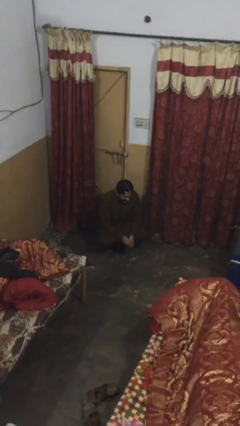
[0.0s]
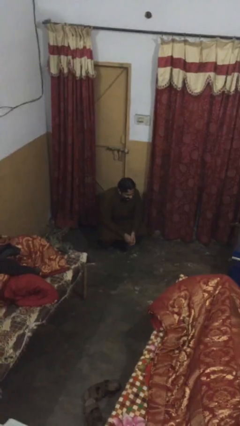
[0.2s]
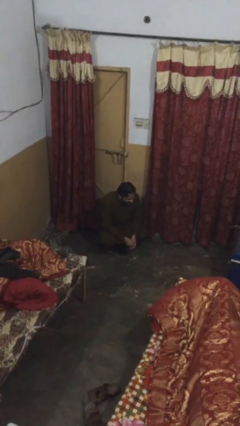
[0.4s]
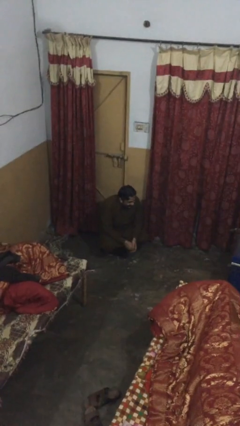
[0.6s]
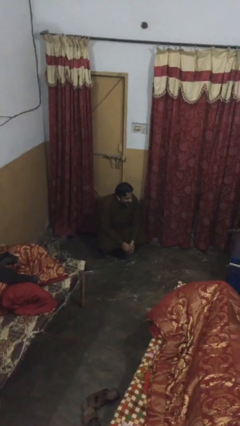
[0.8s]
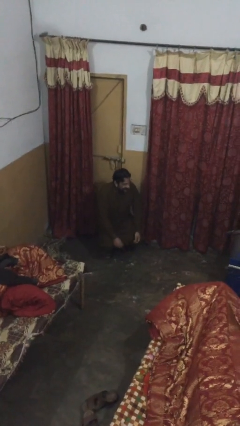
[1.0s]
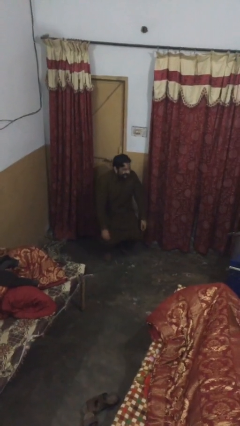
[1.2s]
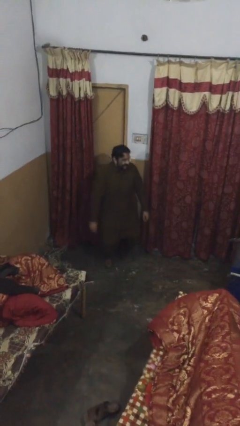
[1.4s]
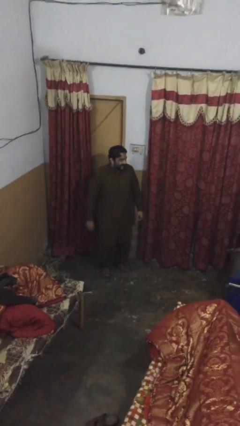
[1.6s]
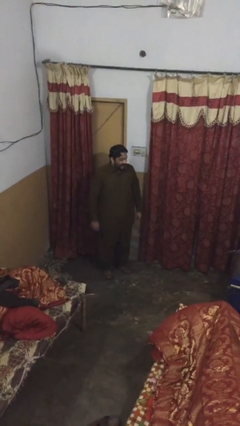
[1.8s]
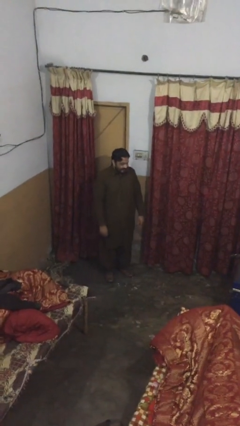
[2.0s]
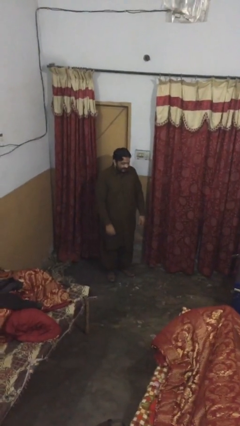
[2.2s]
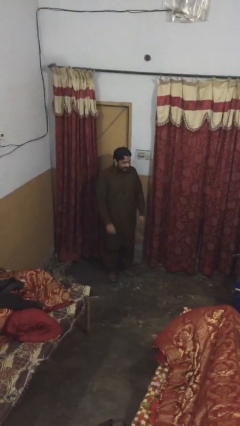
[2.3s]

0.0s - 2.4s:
person stands up

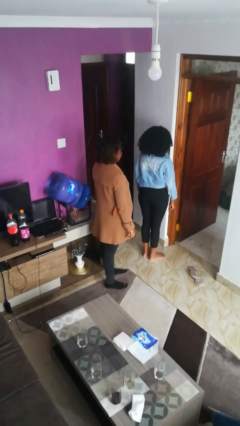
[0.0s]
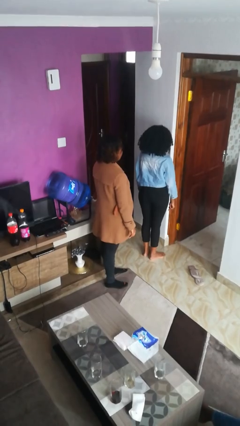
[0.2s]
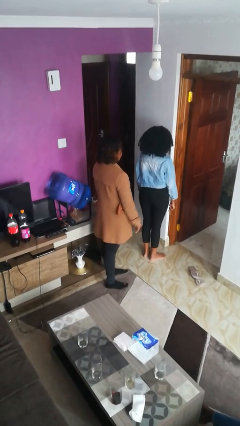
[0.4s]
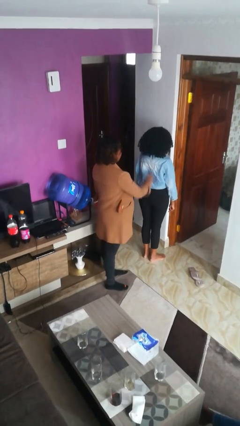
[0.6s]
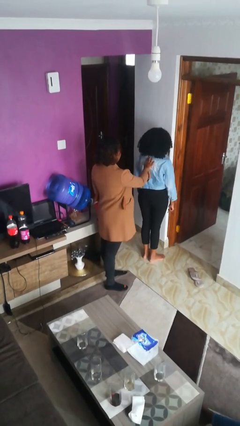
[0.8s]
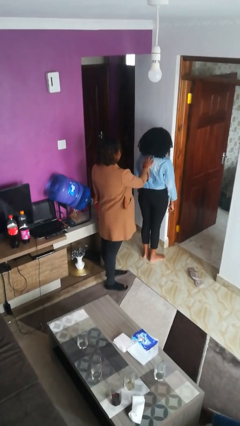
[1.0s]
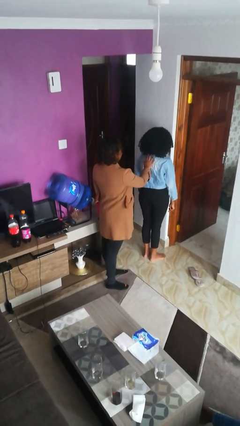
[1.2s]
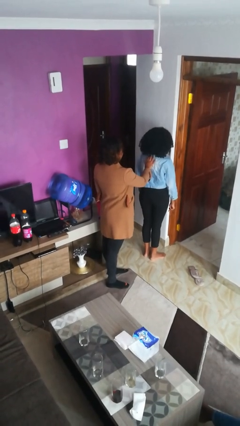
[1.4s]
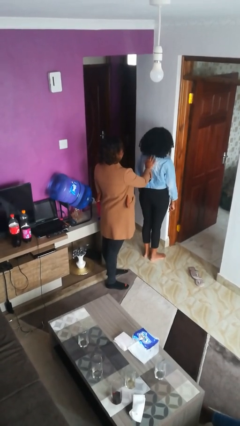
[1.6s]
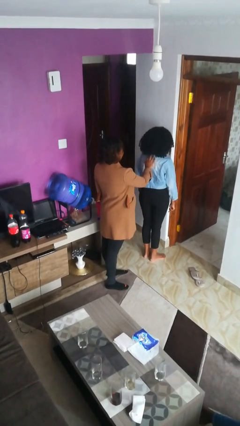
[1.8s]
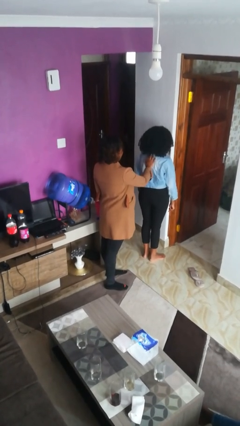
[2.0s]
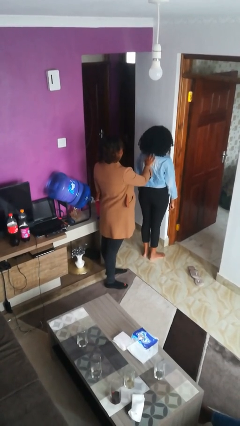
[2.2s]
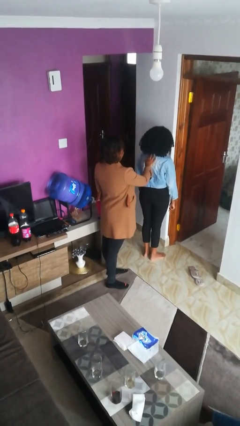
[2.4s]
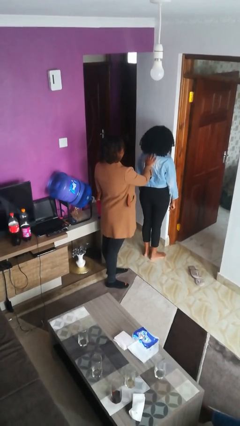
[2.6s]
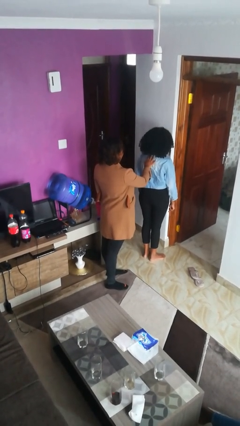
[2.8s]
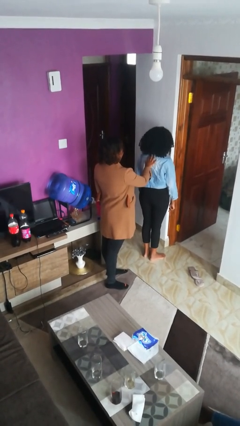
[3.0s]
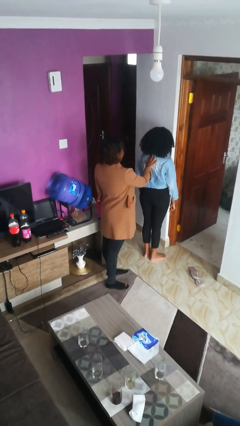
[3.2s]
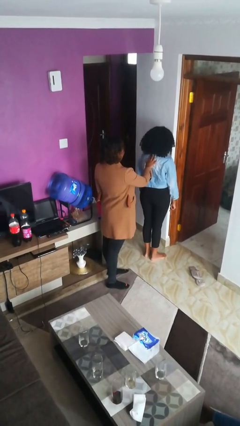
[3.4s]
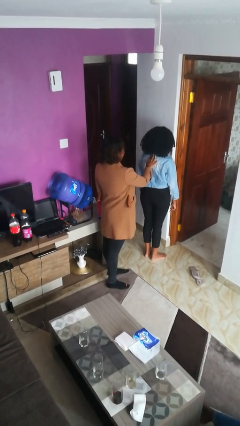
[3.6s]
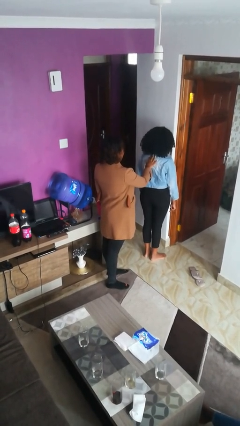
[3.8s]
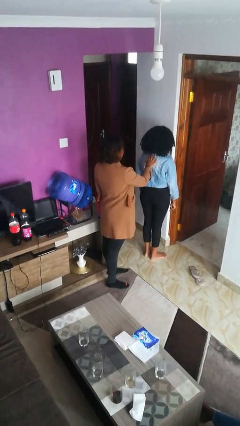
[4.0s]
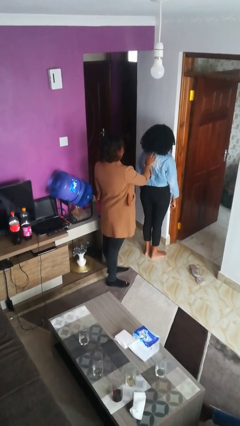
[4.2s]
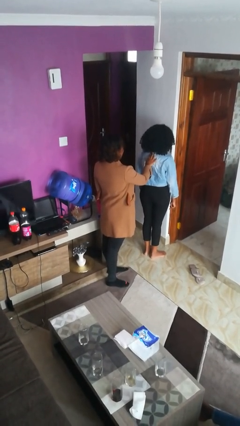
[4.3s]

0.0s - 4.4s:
person touches back of person

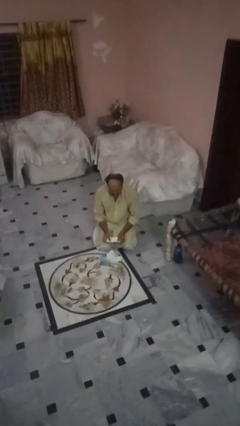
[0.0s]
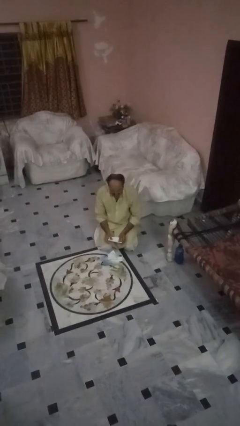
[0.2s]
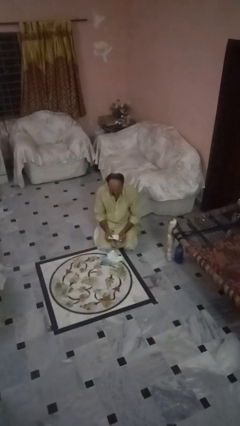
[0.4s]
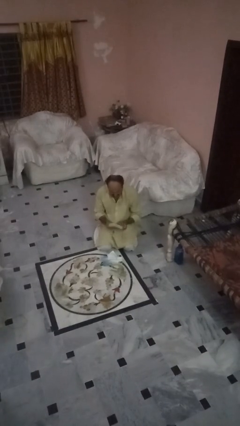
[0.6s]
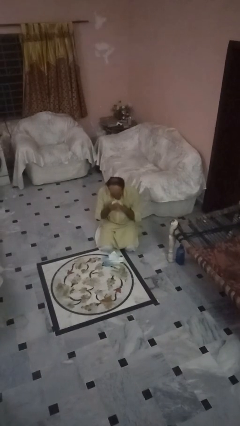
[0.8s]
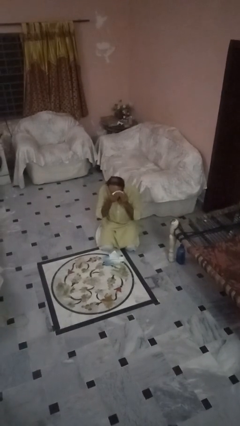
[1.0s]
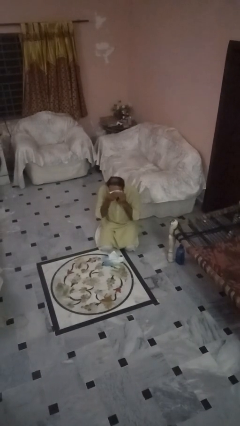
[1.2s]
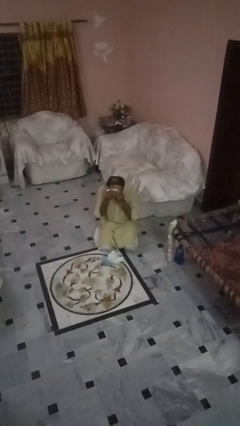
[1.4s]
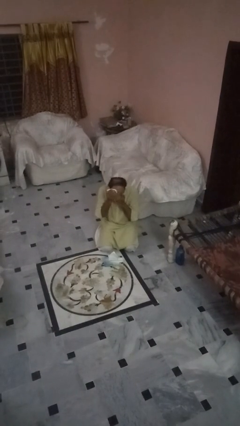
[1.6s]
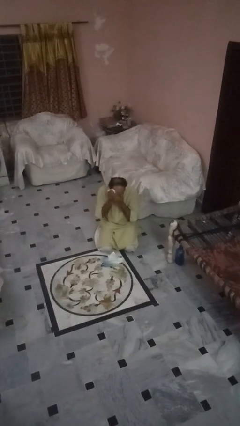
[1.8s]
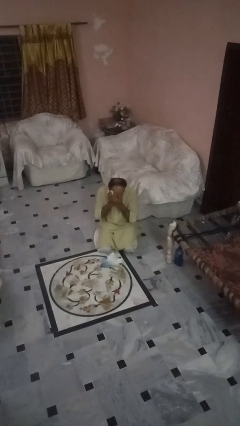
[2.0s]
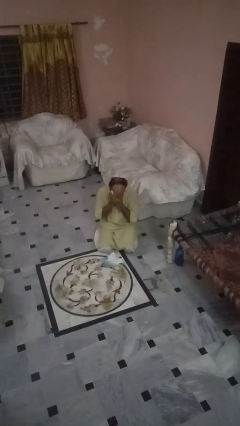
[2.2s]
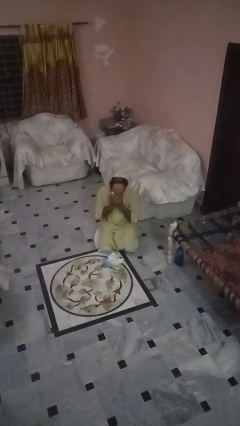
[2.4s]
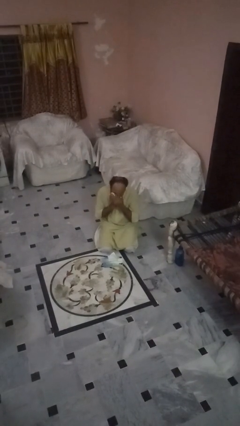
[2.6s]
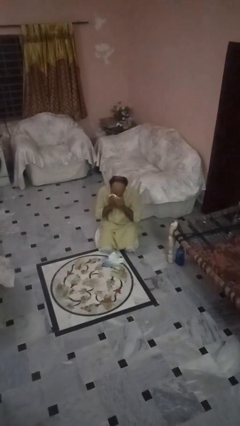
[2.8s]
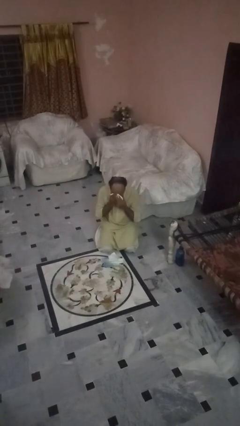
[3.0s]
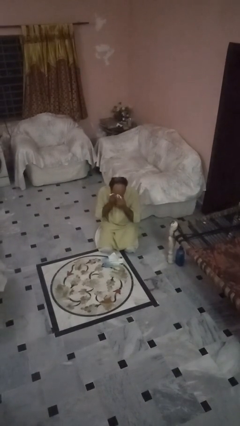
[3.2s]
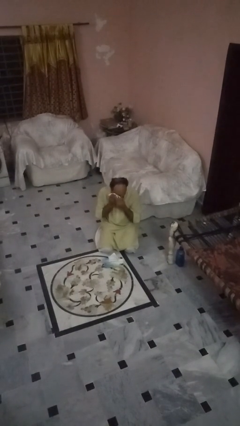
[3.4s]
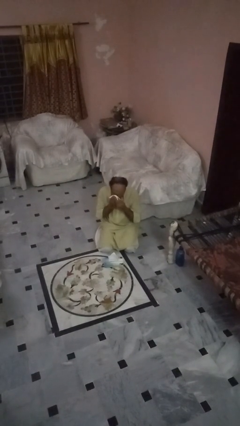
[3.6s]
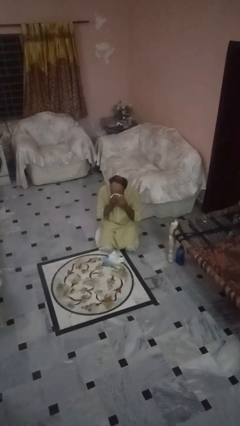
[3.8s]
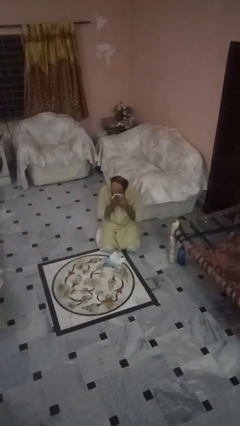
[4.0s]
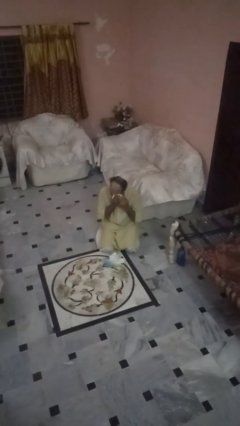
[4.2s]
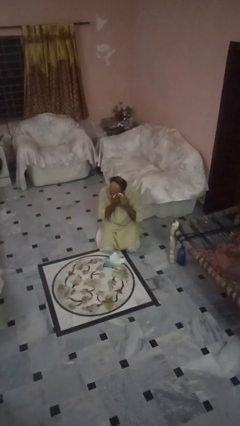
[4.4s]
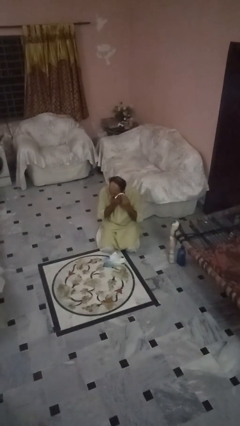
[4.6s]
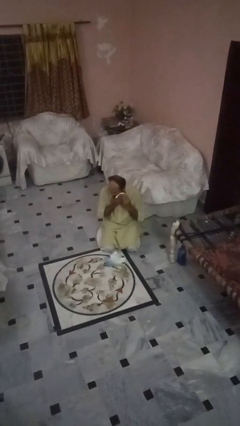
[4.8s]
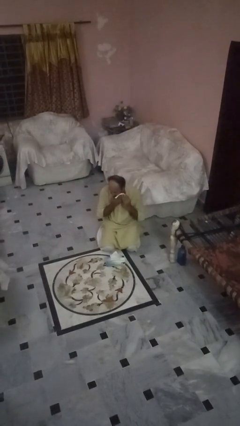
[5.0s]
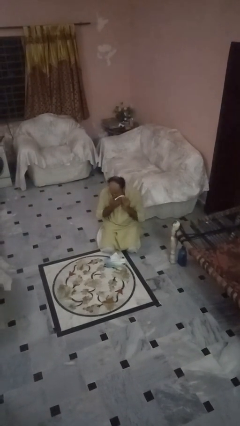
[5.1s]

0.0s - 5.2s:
person wipes mouth with napkin

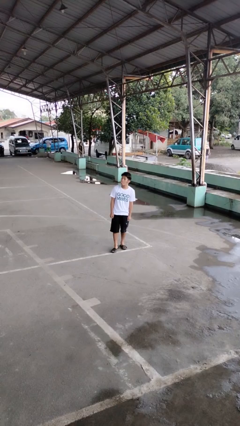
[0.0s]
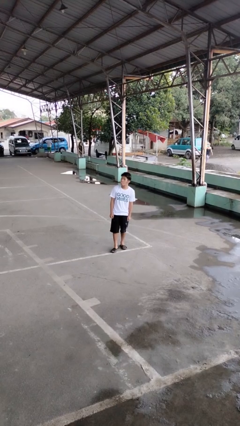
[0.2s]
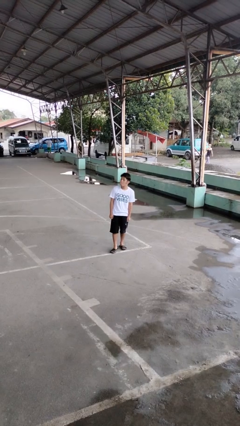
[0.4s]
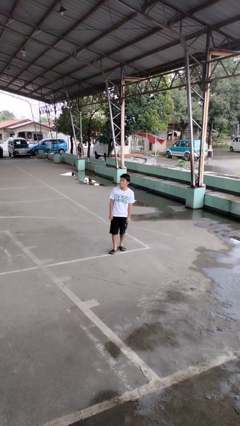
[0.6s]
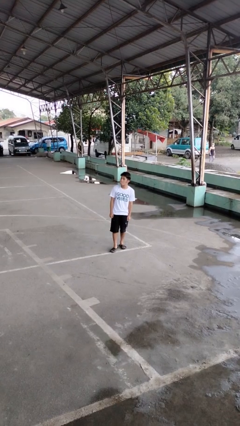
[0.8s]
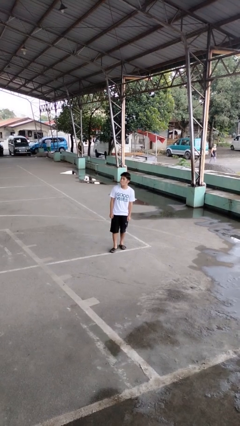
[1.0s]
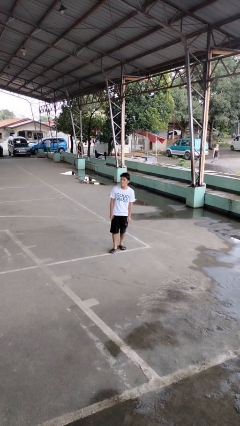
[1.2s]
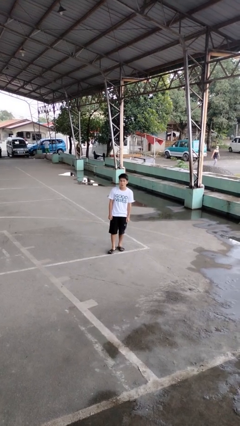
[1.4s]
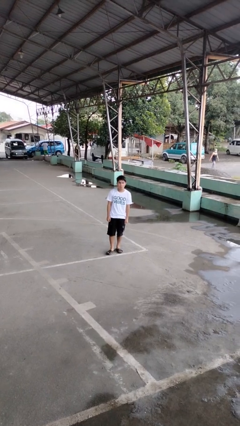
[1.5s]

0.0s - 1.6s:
person sticks out tongue

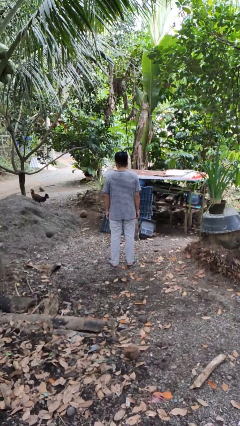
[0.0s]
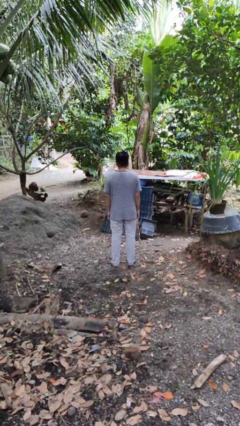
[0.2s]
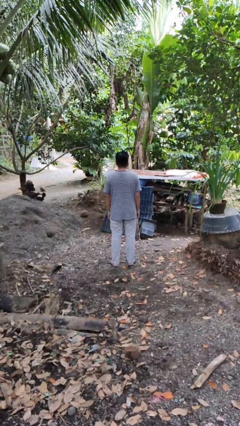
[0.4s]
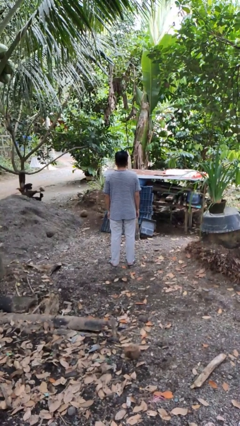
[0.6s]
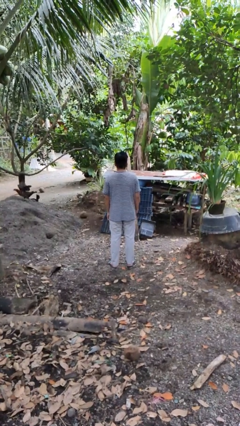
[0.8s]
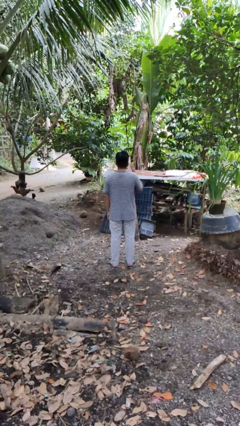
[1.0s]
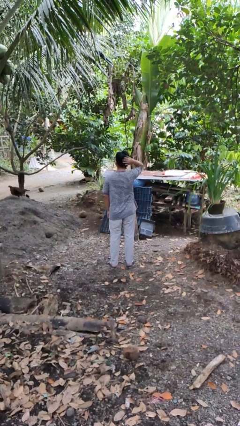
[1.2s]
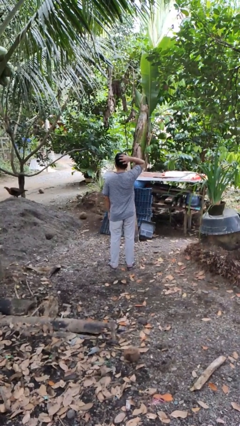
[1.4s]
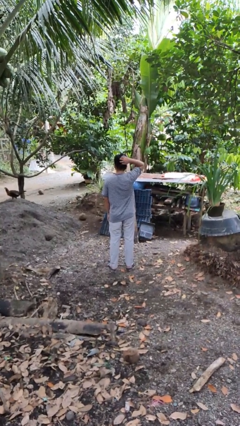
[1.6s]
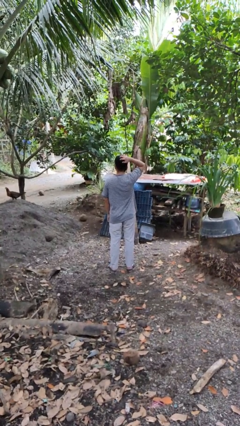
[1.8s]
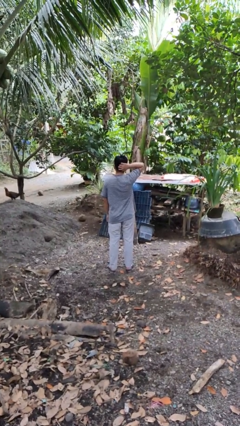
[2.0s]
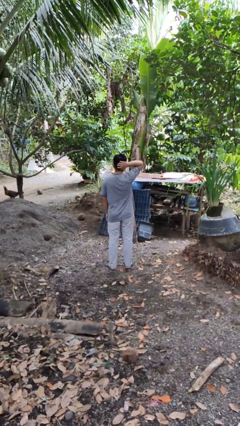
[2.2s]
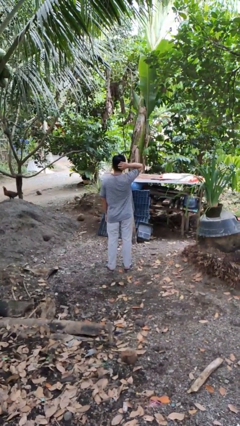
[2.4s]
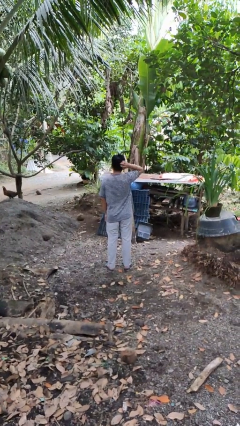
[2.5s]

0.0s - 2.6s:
person scratches face

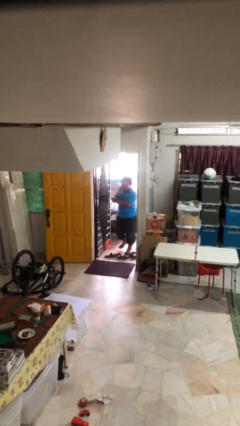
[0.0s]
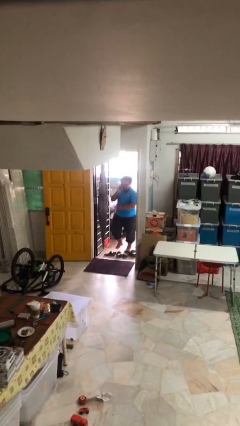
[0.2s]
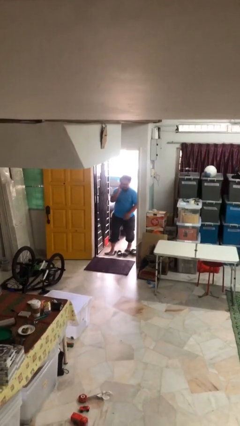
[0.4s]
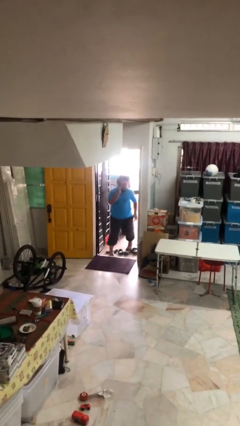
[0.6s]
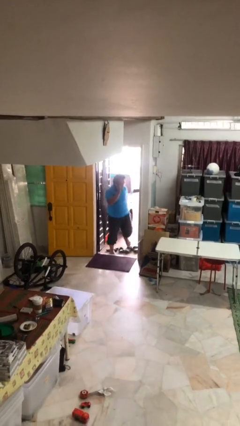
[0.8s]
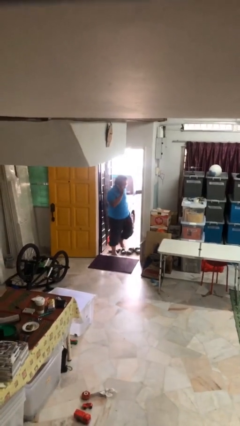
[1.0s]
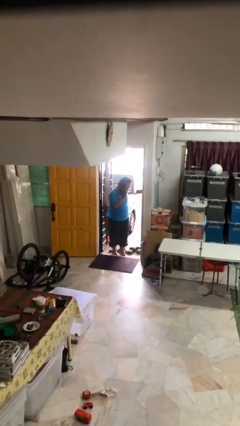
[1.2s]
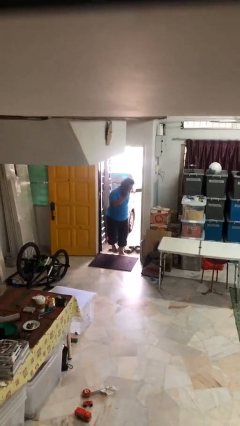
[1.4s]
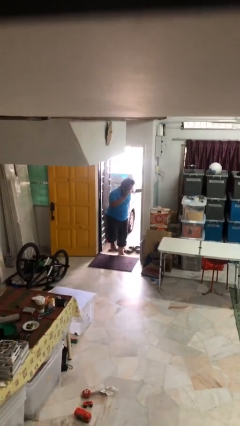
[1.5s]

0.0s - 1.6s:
person enters scene through structure
